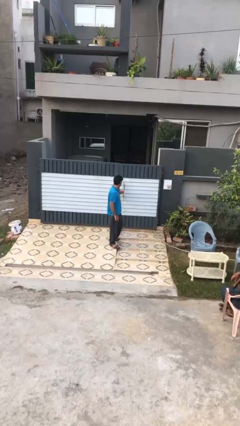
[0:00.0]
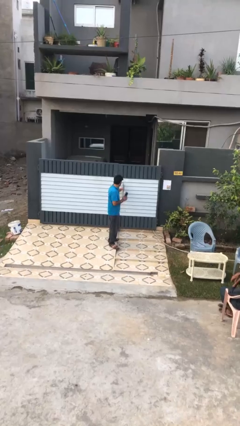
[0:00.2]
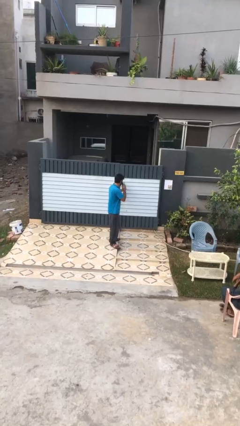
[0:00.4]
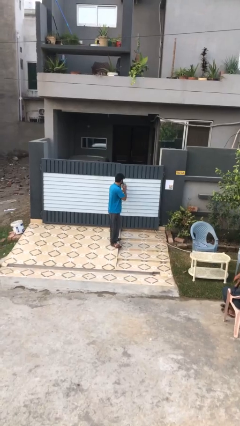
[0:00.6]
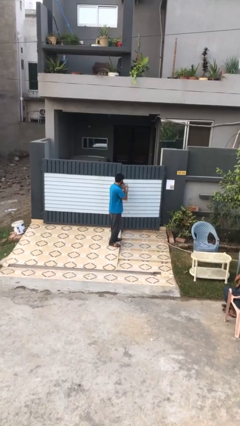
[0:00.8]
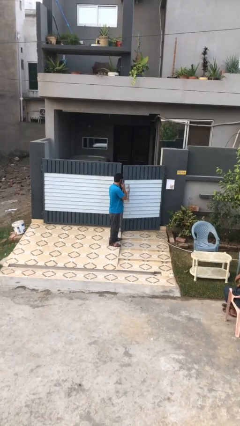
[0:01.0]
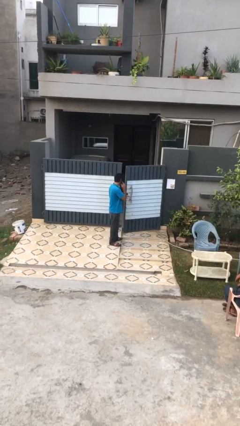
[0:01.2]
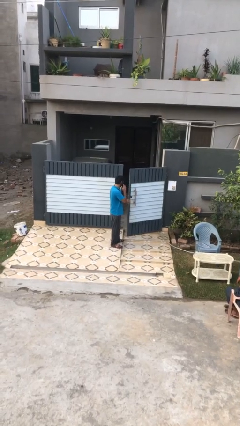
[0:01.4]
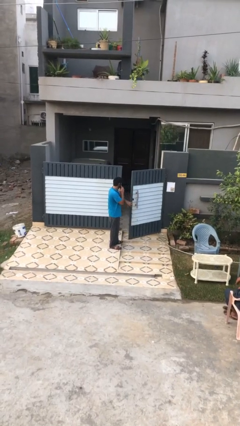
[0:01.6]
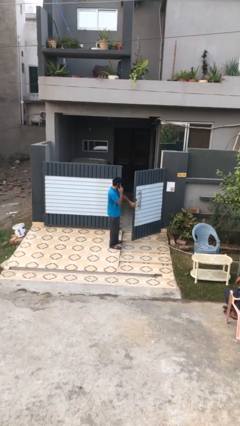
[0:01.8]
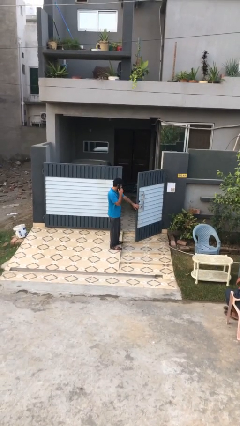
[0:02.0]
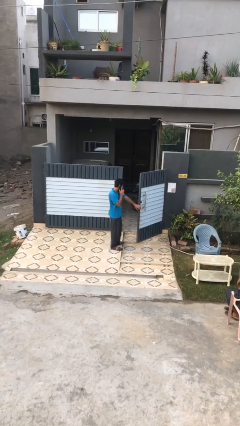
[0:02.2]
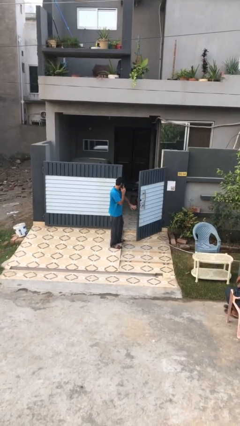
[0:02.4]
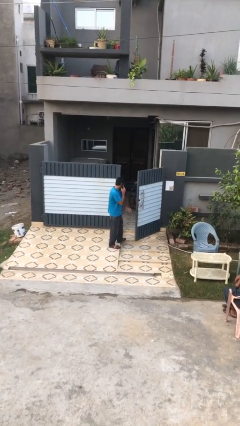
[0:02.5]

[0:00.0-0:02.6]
person opens facility door

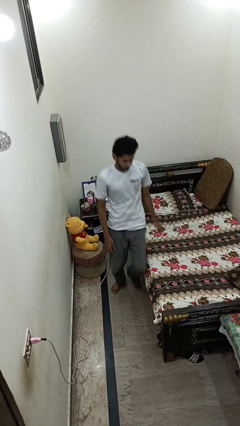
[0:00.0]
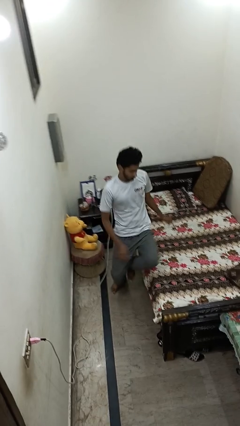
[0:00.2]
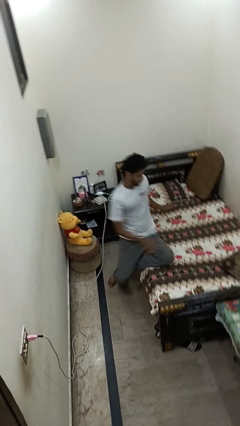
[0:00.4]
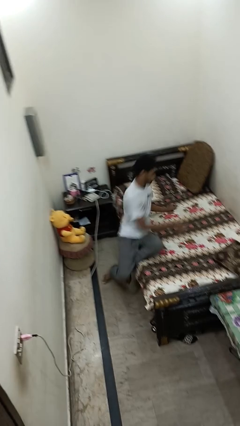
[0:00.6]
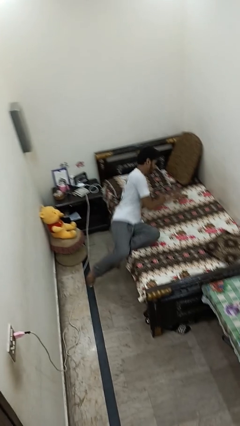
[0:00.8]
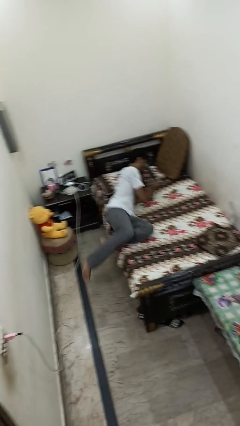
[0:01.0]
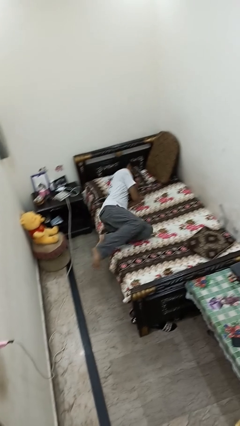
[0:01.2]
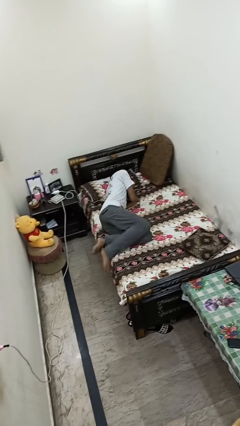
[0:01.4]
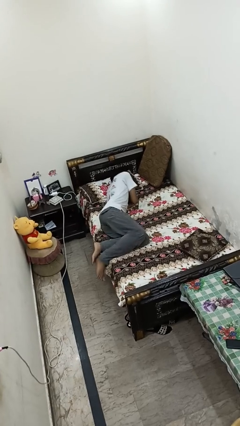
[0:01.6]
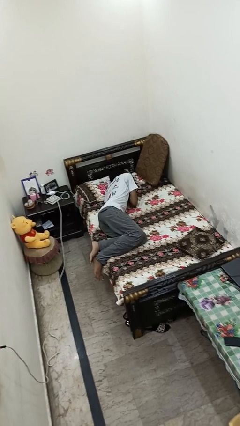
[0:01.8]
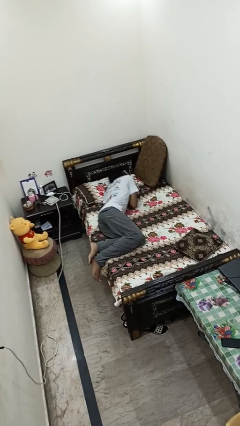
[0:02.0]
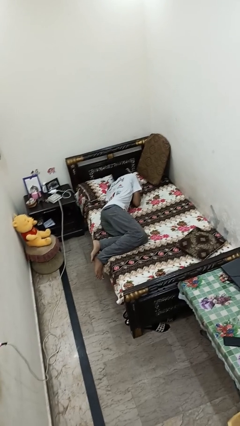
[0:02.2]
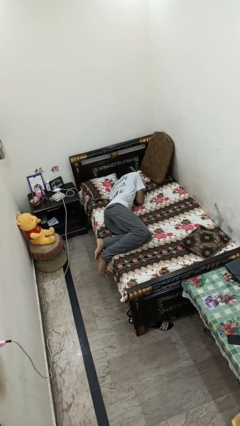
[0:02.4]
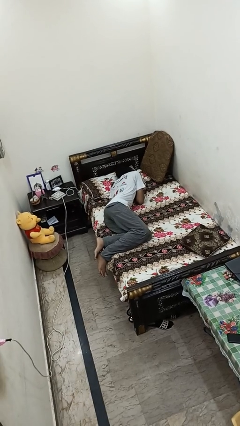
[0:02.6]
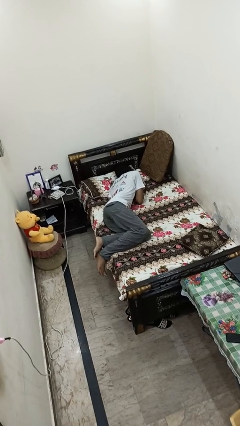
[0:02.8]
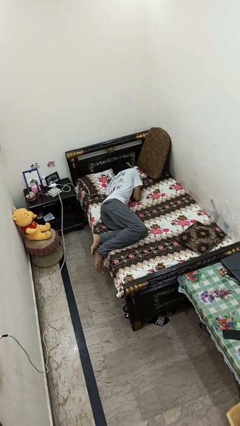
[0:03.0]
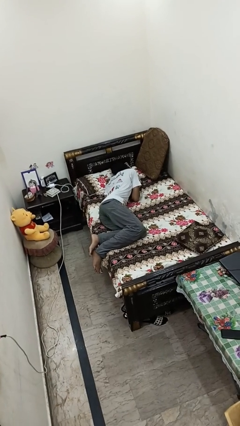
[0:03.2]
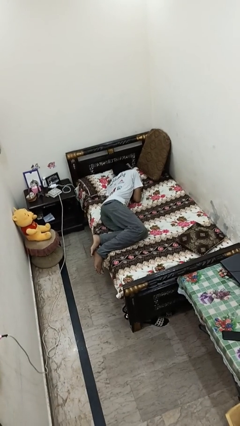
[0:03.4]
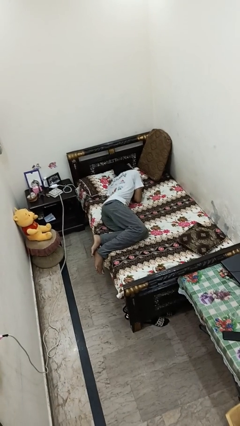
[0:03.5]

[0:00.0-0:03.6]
person lies down on bed

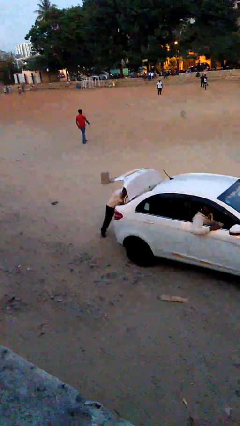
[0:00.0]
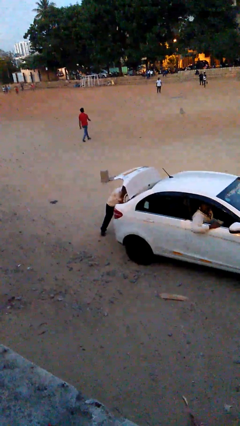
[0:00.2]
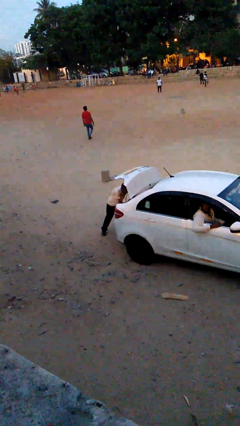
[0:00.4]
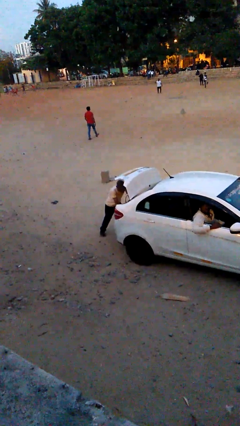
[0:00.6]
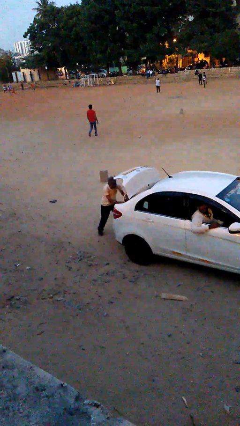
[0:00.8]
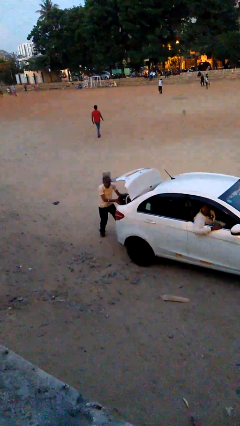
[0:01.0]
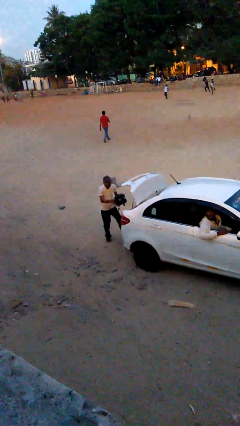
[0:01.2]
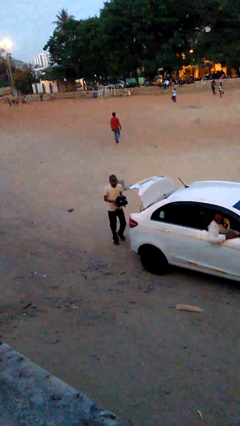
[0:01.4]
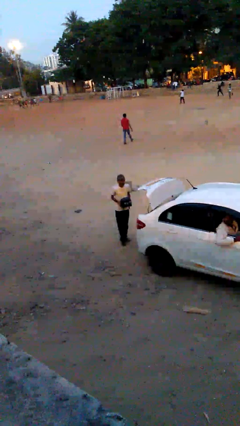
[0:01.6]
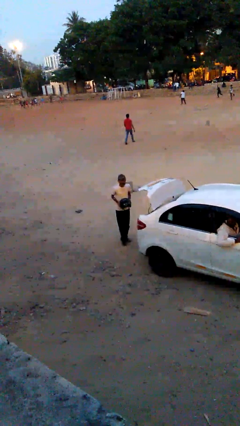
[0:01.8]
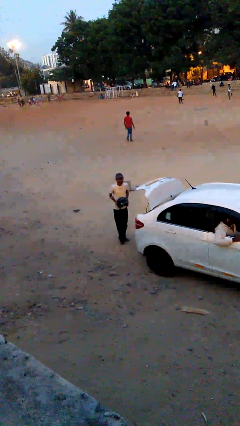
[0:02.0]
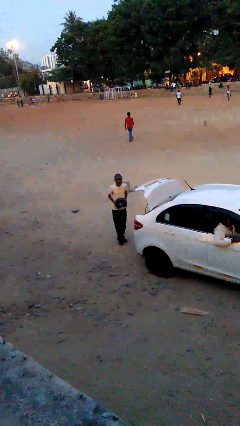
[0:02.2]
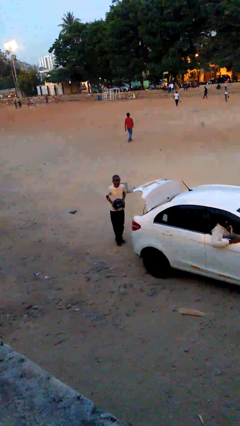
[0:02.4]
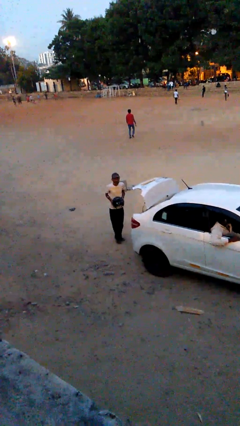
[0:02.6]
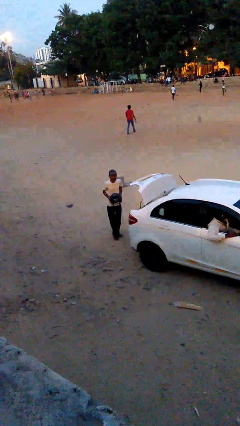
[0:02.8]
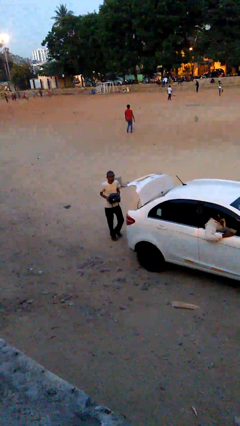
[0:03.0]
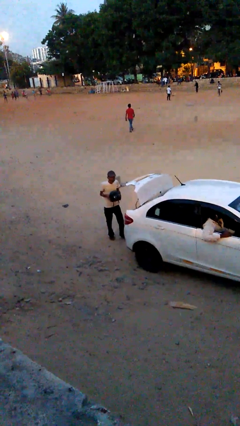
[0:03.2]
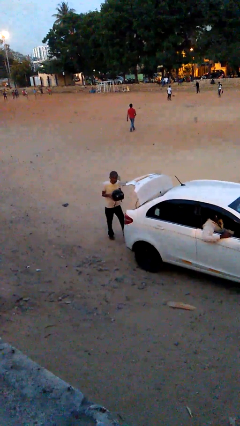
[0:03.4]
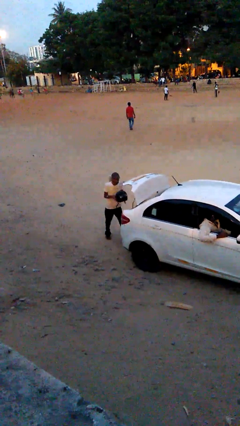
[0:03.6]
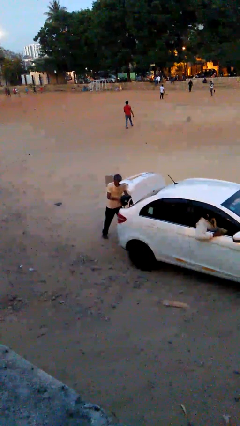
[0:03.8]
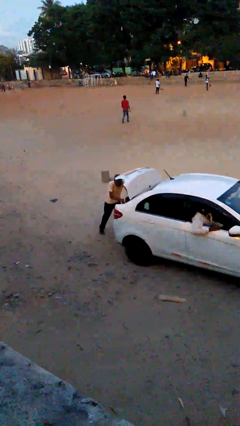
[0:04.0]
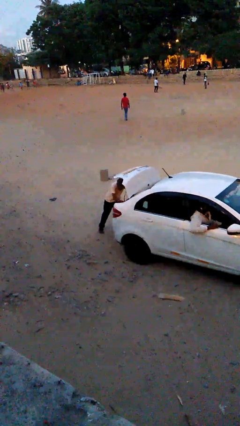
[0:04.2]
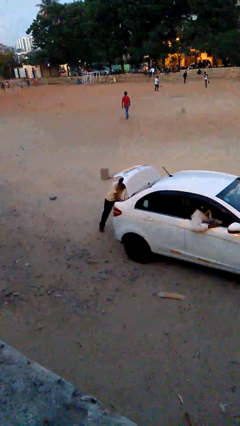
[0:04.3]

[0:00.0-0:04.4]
person unloads car

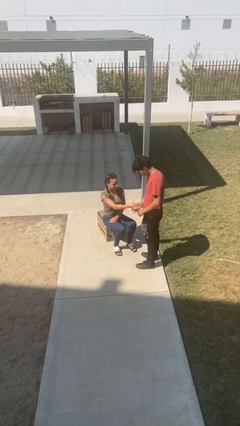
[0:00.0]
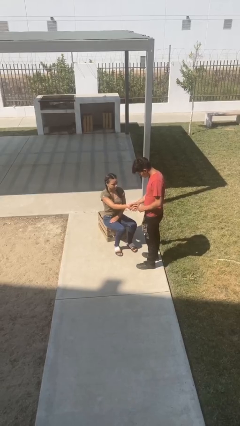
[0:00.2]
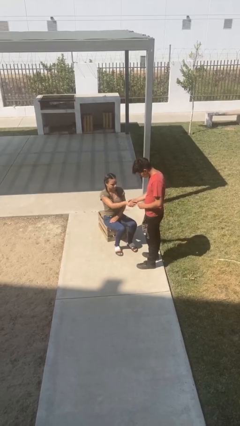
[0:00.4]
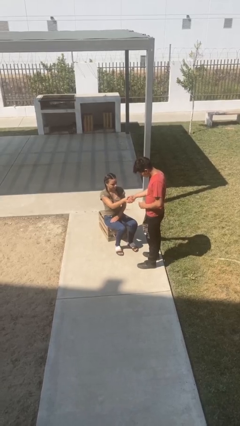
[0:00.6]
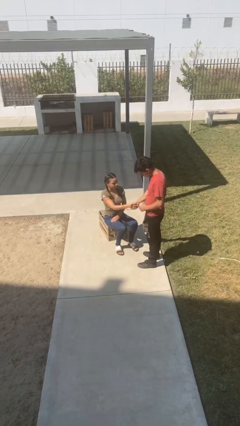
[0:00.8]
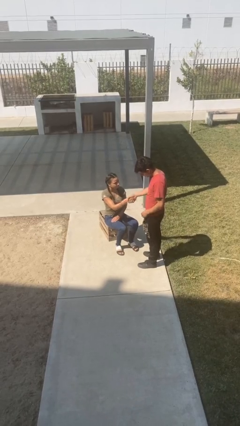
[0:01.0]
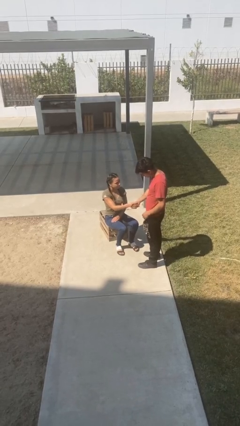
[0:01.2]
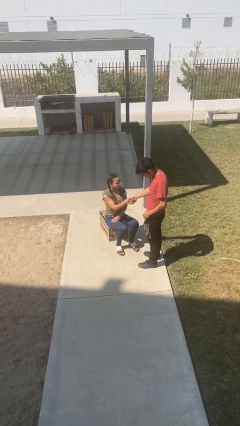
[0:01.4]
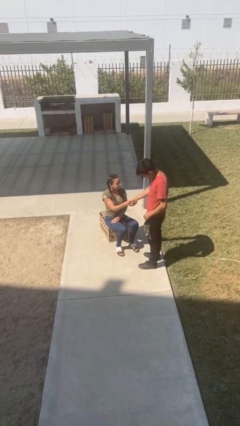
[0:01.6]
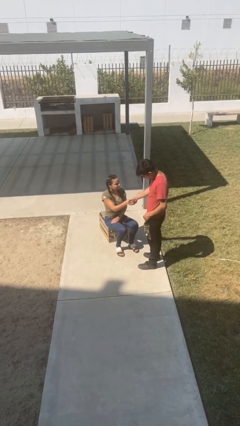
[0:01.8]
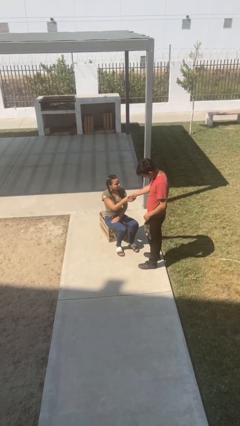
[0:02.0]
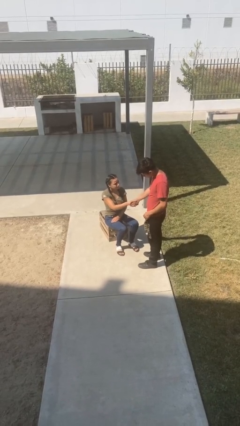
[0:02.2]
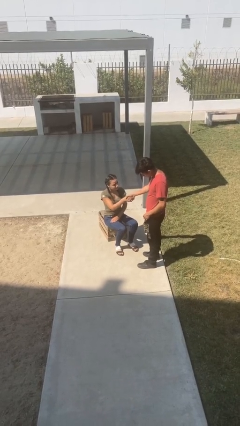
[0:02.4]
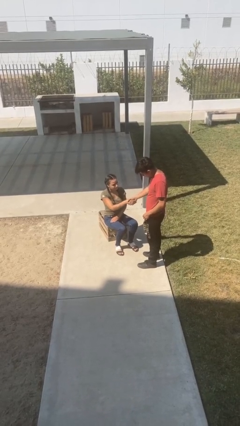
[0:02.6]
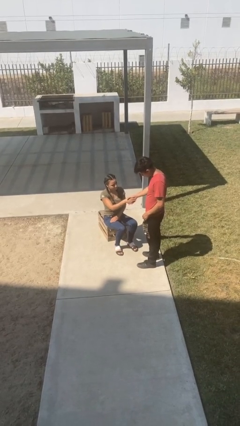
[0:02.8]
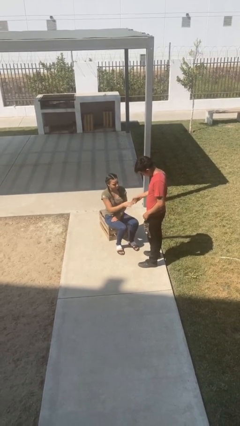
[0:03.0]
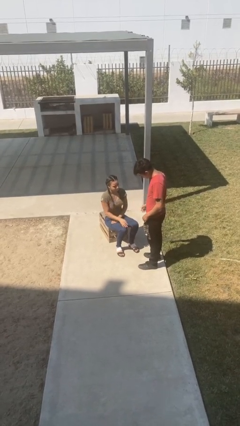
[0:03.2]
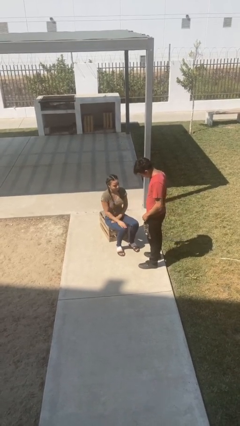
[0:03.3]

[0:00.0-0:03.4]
person shakes hand

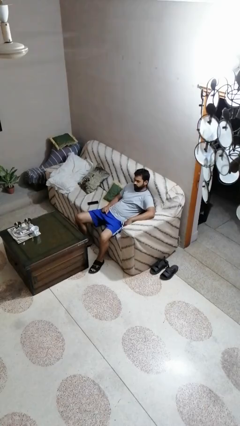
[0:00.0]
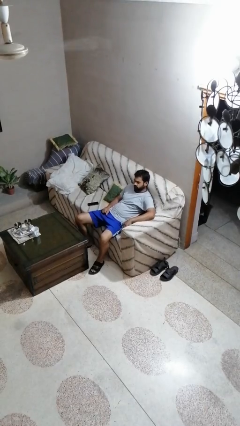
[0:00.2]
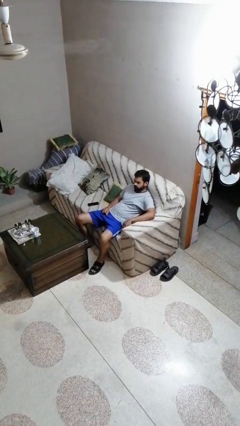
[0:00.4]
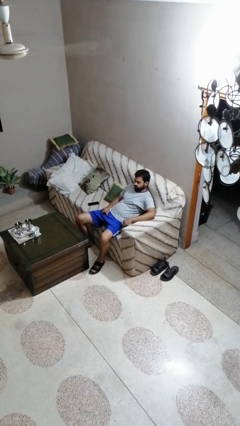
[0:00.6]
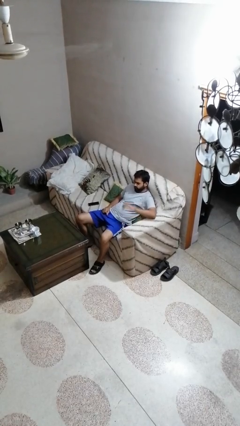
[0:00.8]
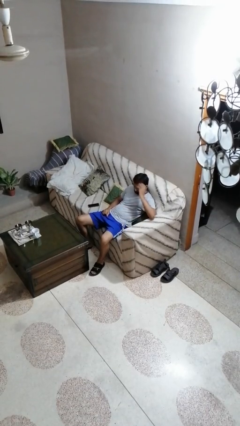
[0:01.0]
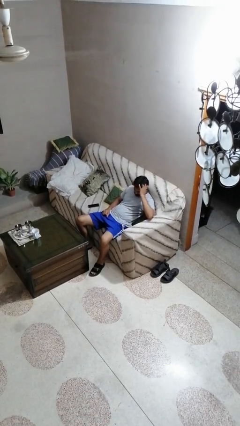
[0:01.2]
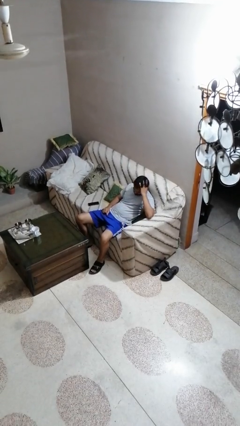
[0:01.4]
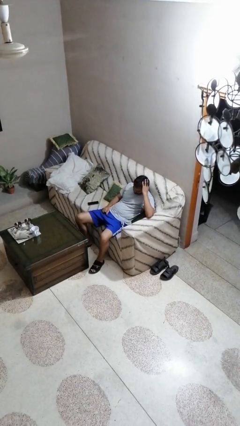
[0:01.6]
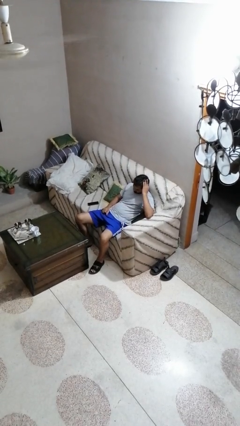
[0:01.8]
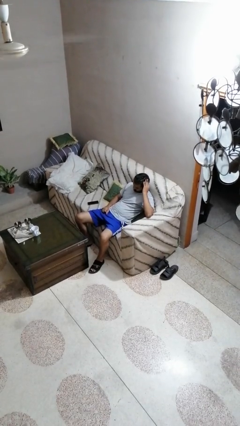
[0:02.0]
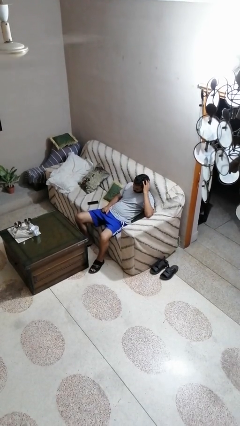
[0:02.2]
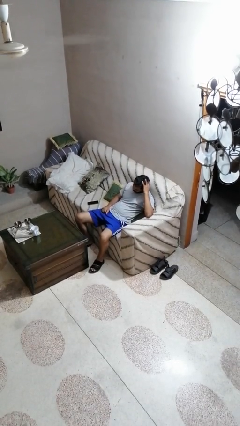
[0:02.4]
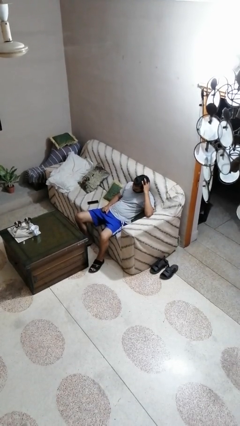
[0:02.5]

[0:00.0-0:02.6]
person strokes hair

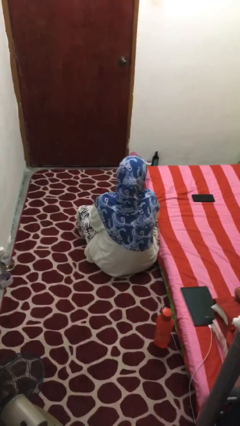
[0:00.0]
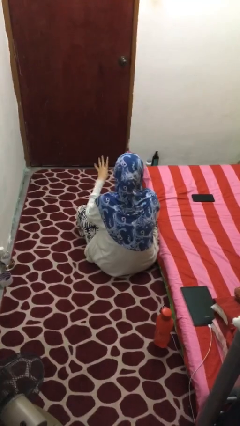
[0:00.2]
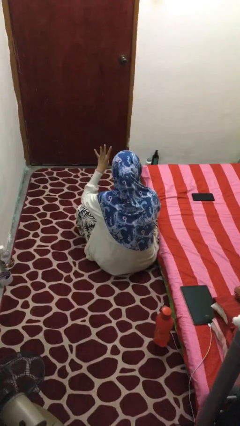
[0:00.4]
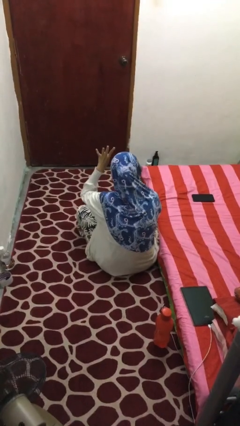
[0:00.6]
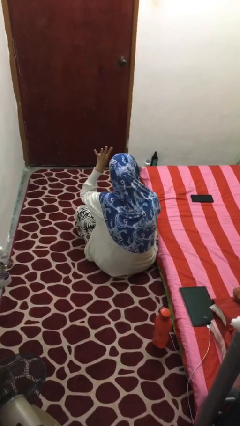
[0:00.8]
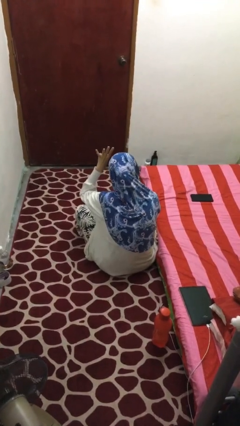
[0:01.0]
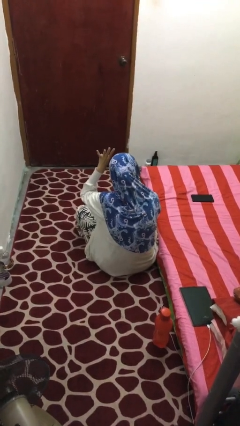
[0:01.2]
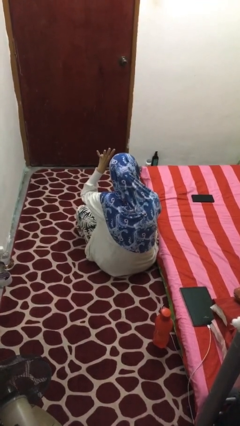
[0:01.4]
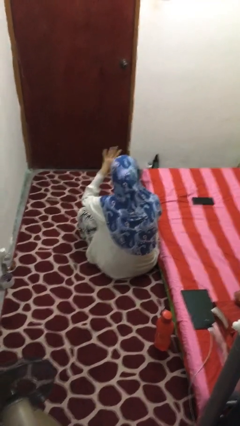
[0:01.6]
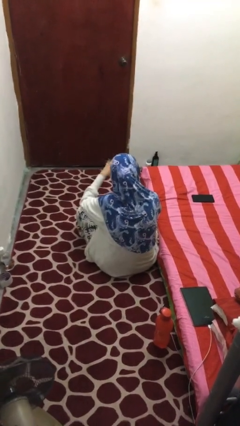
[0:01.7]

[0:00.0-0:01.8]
person gestures number four
